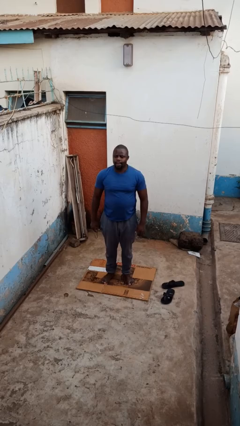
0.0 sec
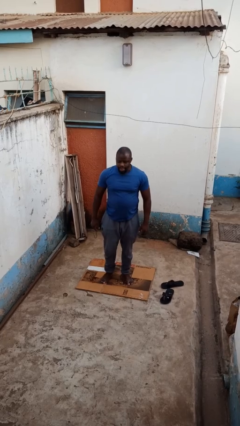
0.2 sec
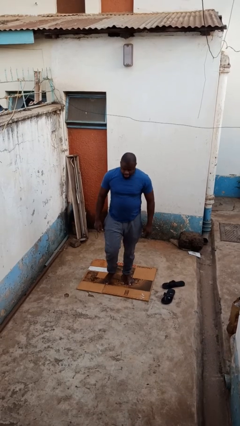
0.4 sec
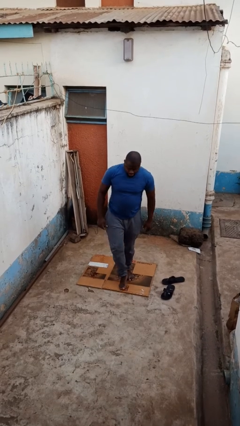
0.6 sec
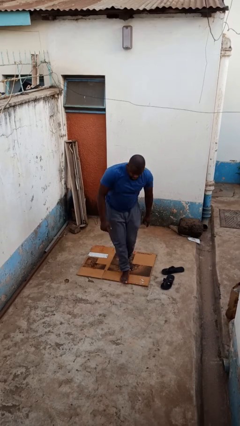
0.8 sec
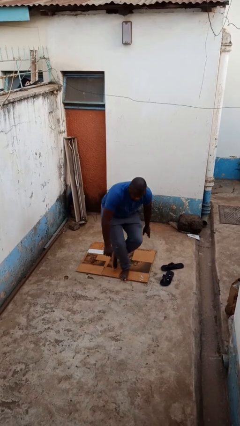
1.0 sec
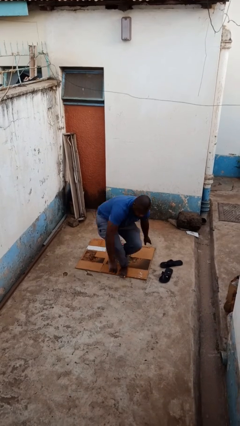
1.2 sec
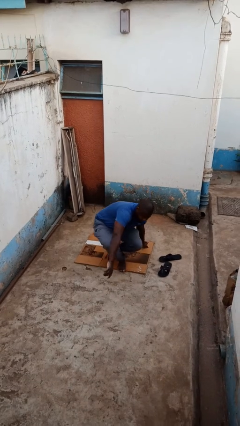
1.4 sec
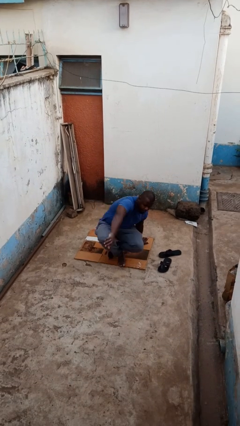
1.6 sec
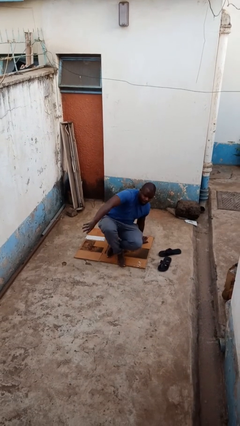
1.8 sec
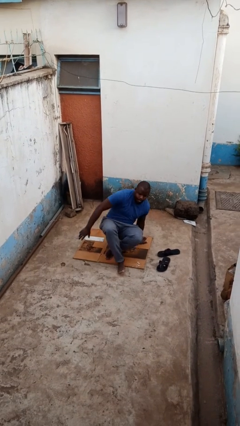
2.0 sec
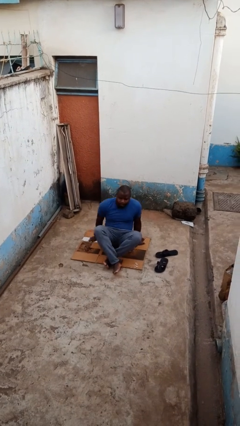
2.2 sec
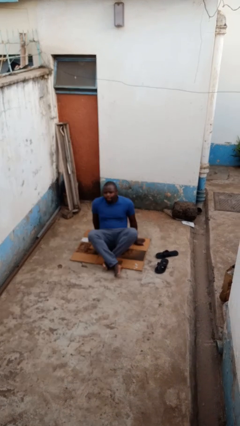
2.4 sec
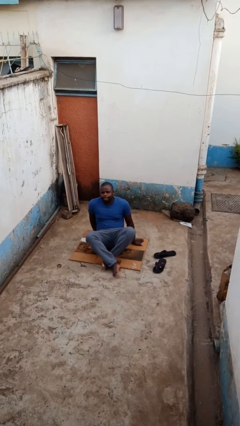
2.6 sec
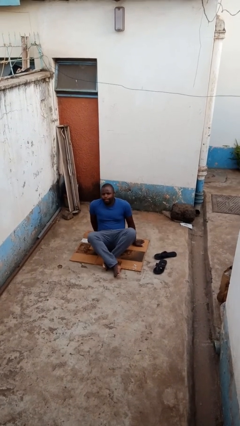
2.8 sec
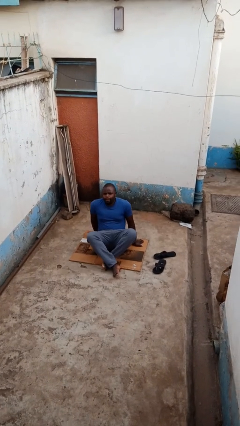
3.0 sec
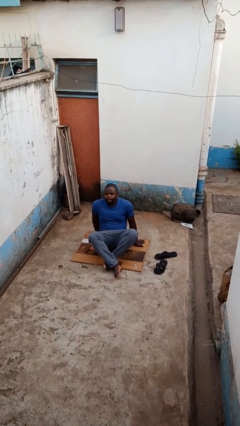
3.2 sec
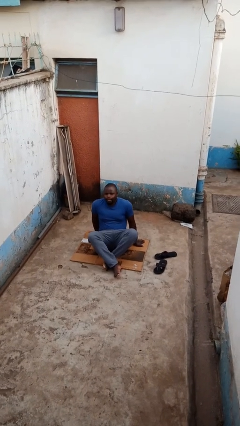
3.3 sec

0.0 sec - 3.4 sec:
person sits crisscross

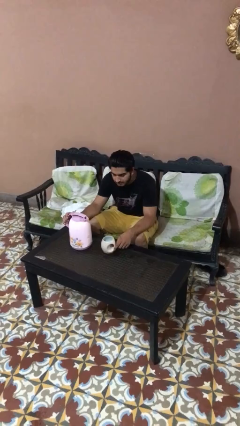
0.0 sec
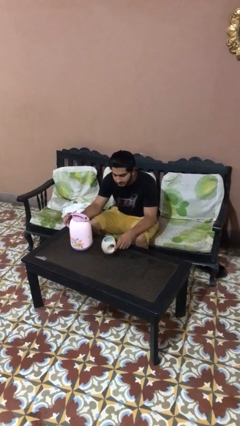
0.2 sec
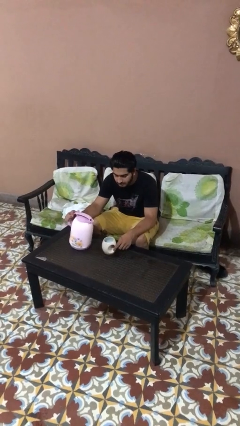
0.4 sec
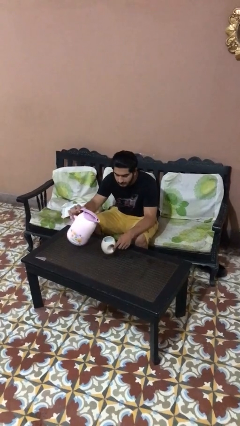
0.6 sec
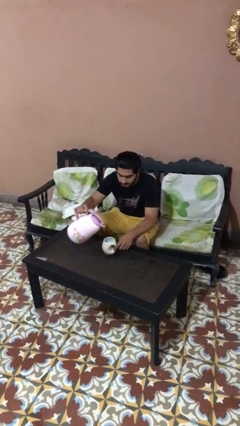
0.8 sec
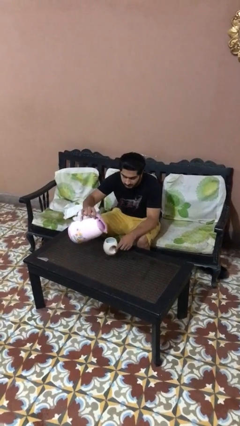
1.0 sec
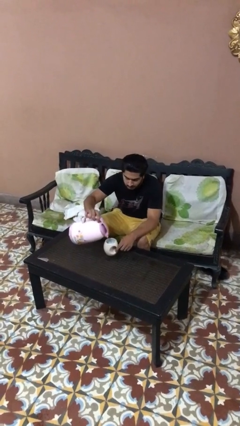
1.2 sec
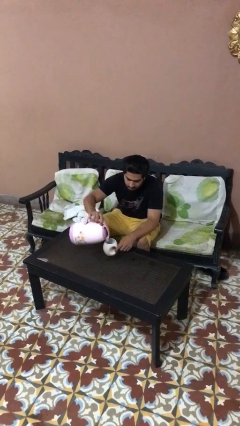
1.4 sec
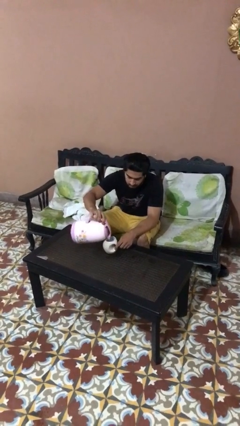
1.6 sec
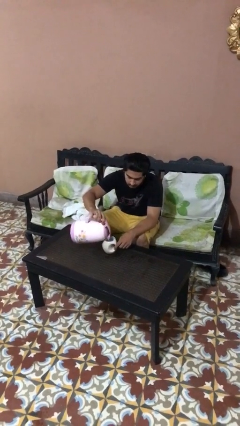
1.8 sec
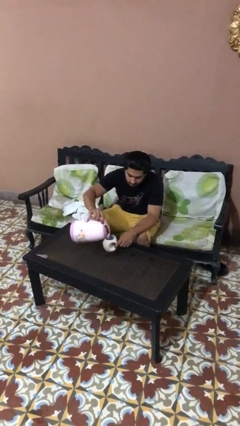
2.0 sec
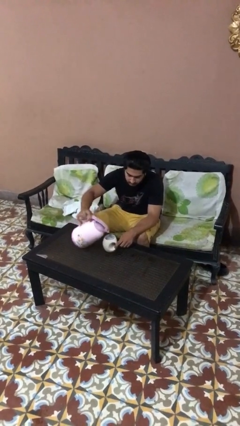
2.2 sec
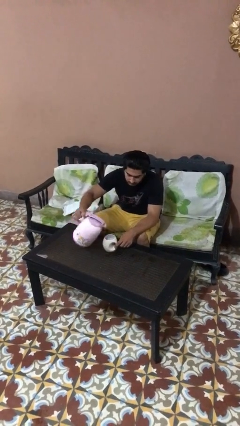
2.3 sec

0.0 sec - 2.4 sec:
person pours coffee into mug

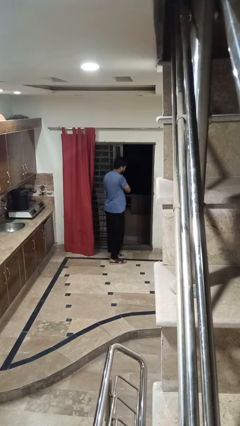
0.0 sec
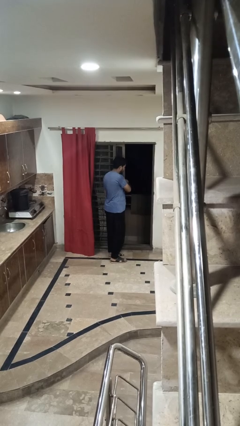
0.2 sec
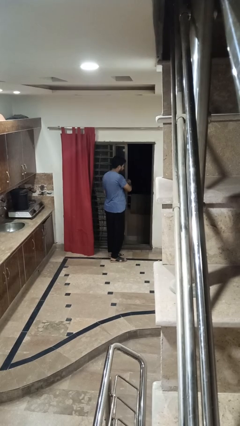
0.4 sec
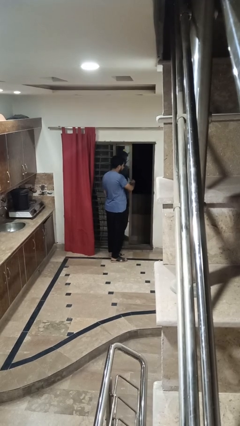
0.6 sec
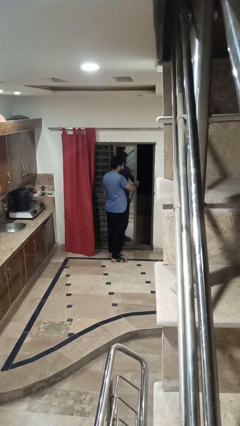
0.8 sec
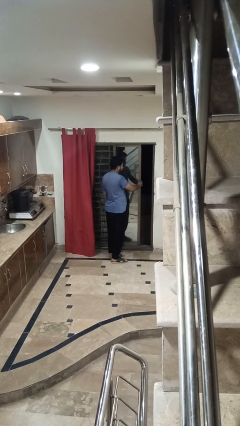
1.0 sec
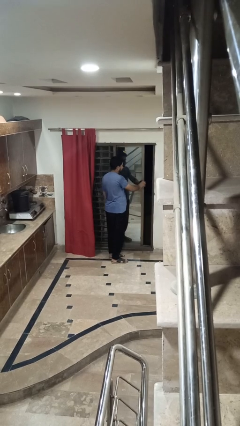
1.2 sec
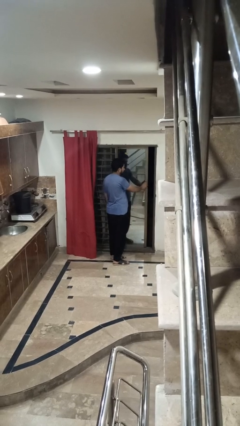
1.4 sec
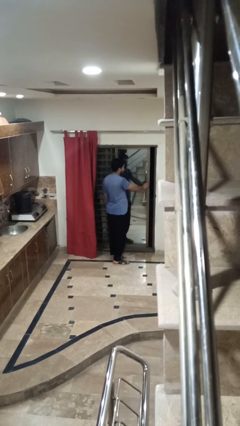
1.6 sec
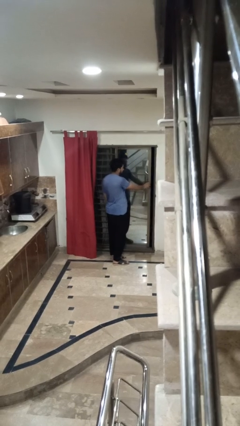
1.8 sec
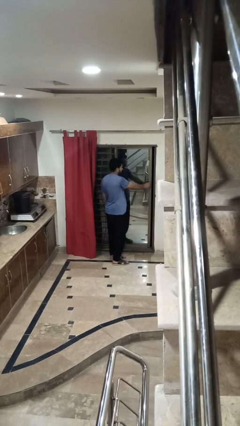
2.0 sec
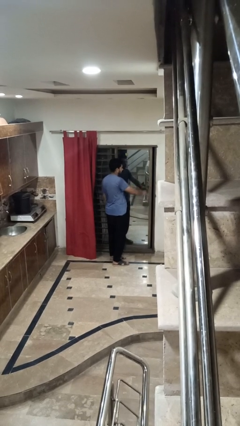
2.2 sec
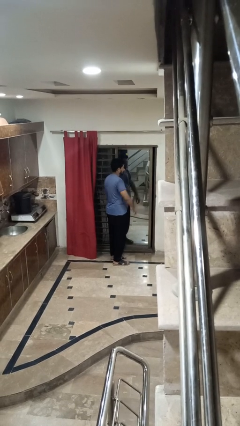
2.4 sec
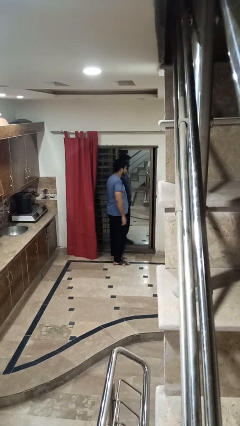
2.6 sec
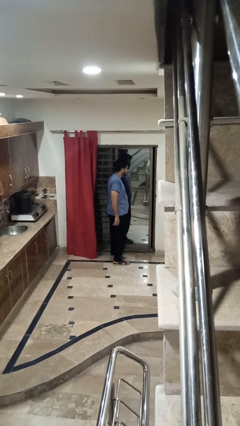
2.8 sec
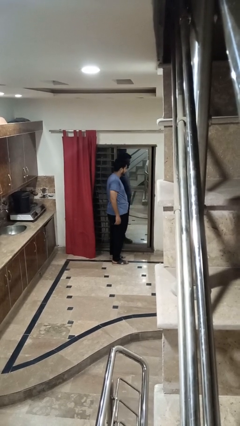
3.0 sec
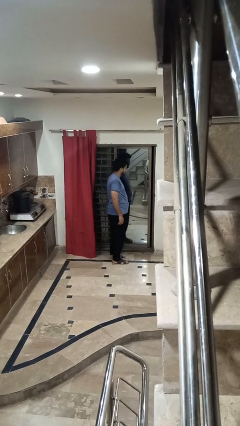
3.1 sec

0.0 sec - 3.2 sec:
person closes sliding door

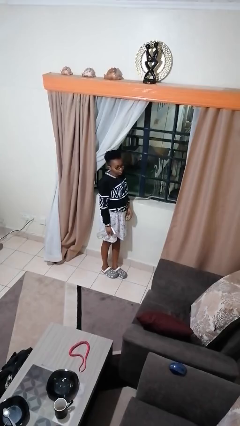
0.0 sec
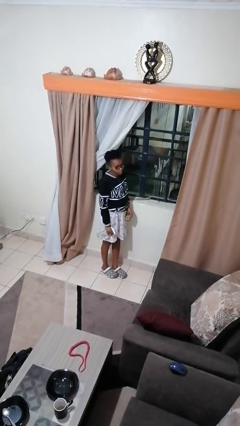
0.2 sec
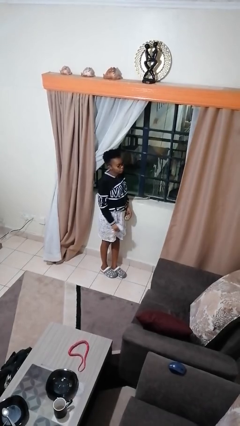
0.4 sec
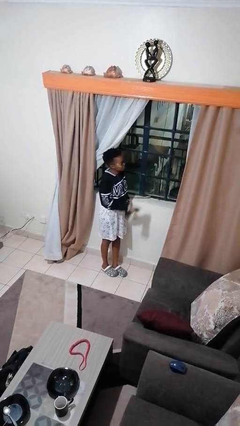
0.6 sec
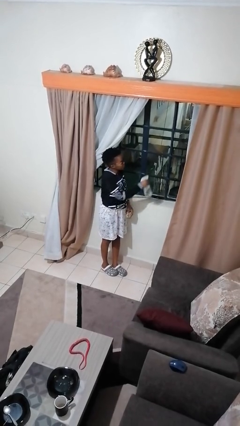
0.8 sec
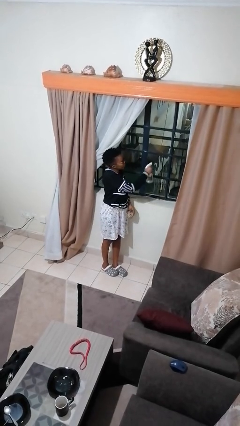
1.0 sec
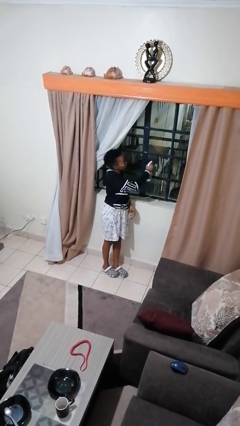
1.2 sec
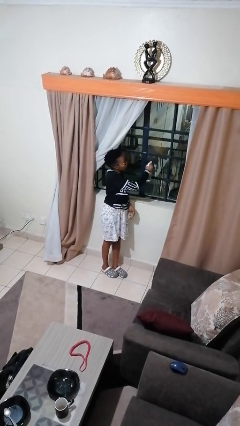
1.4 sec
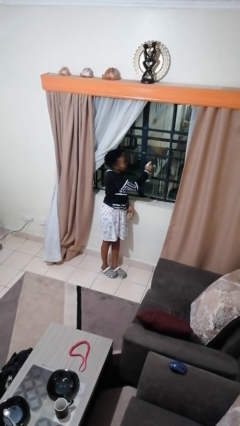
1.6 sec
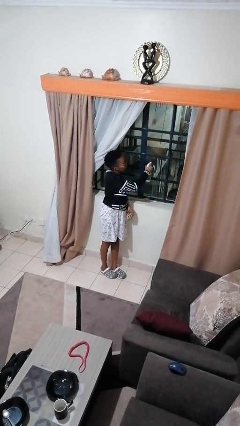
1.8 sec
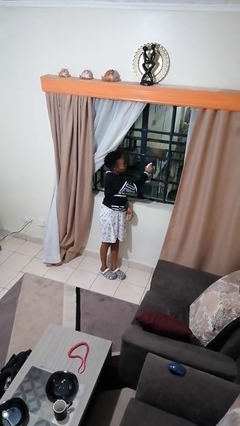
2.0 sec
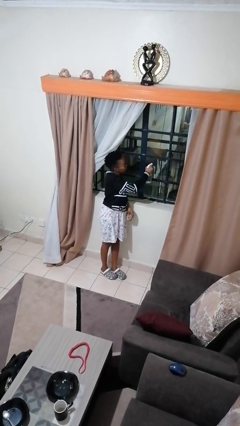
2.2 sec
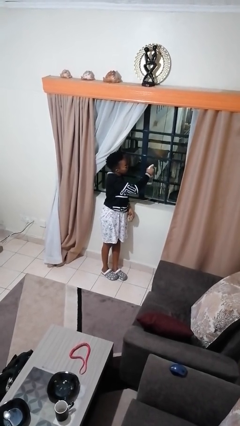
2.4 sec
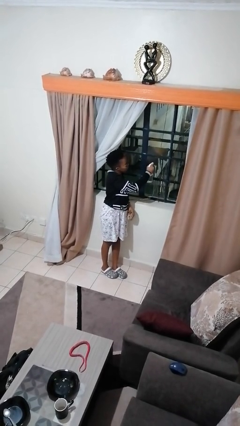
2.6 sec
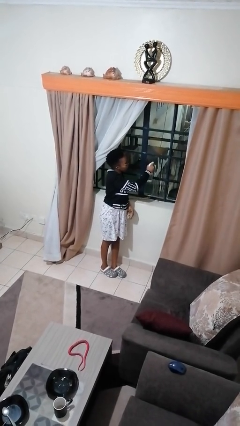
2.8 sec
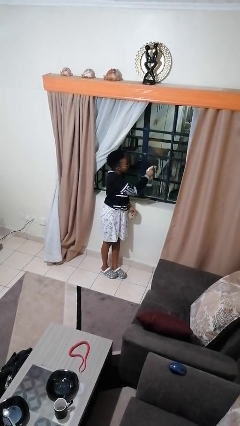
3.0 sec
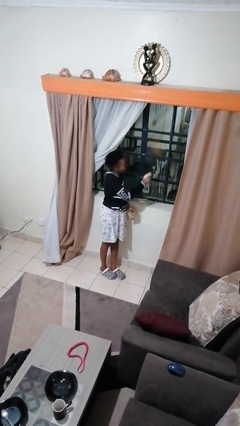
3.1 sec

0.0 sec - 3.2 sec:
person sprays from bottle

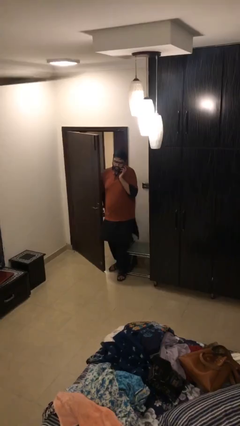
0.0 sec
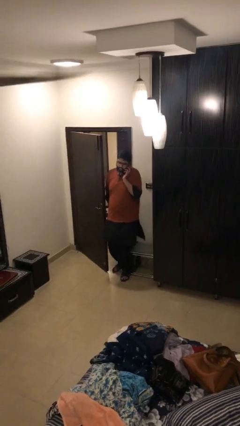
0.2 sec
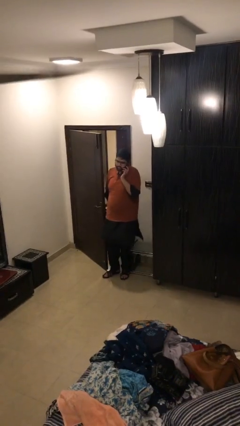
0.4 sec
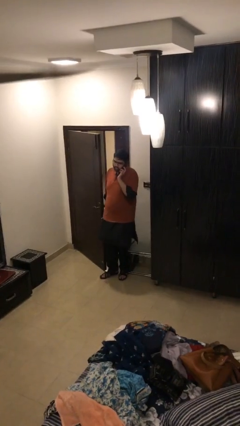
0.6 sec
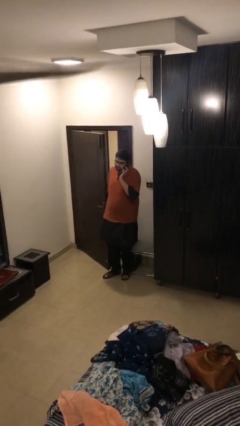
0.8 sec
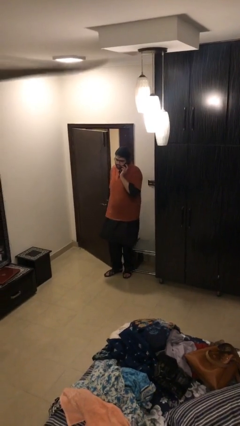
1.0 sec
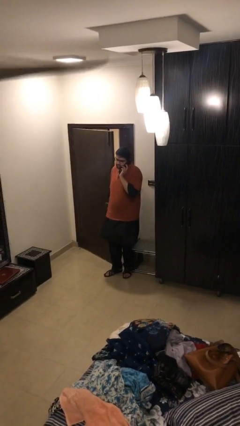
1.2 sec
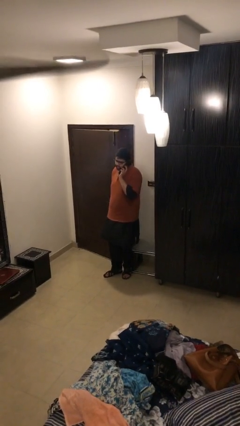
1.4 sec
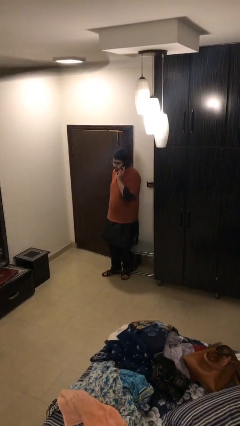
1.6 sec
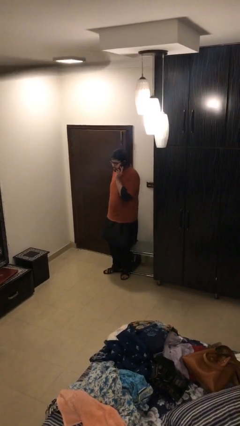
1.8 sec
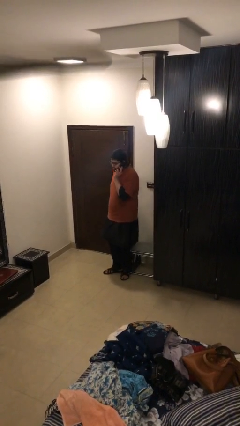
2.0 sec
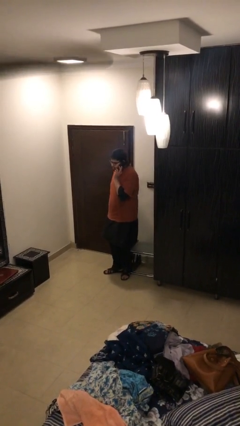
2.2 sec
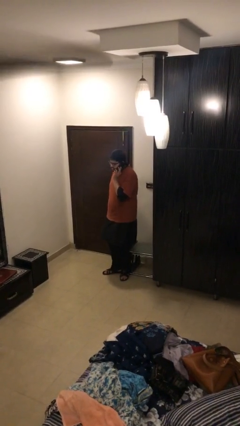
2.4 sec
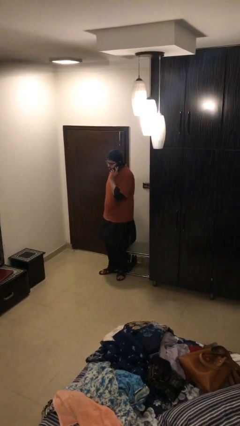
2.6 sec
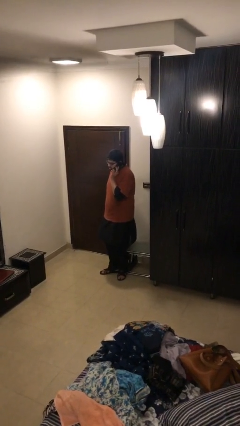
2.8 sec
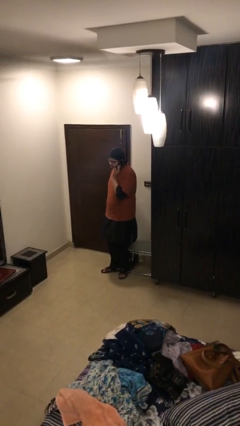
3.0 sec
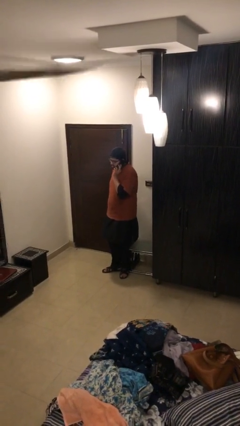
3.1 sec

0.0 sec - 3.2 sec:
person closes facility door

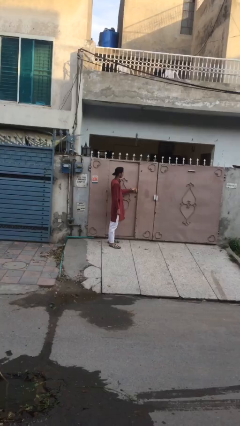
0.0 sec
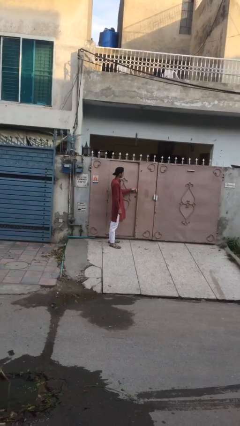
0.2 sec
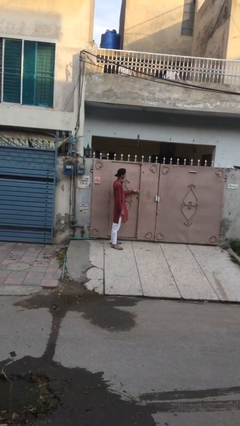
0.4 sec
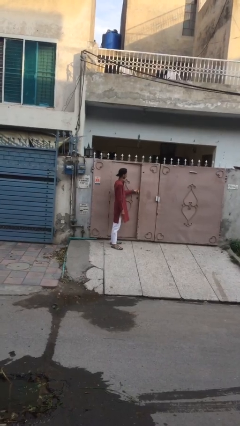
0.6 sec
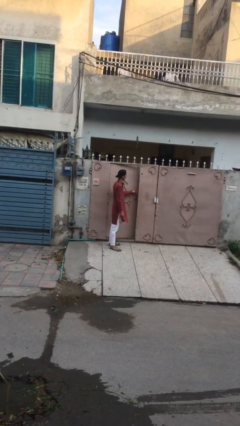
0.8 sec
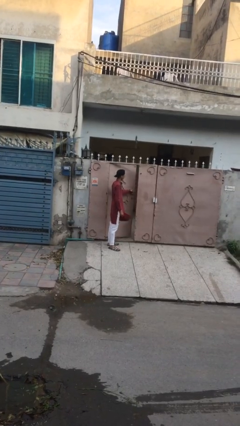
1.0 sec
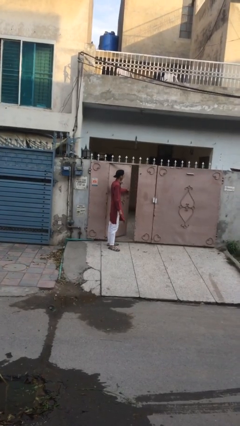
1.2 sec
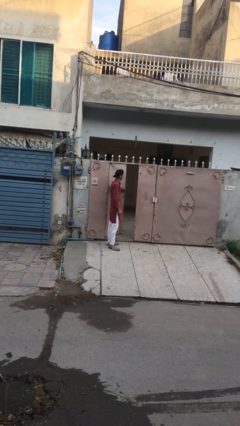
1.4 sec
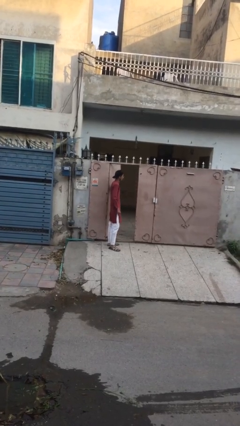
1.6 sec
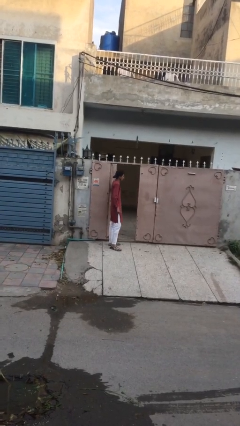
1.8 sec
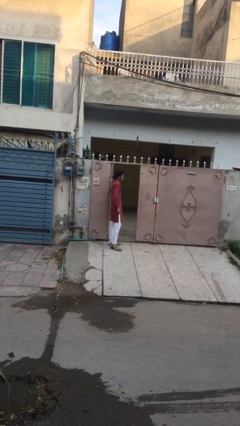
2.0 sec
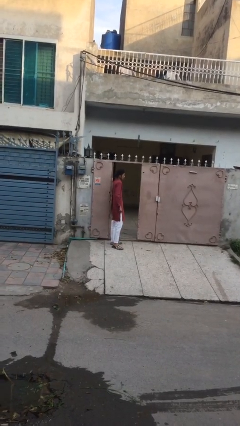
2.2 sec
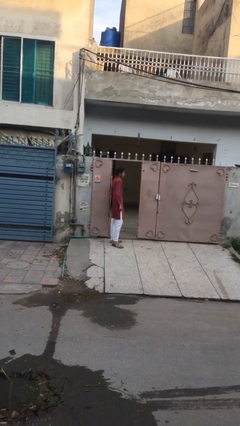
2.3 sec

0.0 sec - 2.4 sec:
person opens facility door
